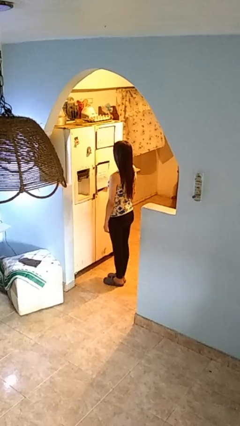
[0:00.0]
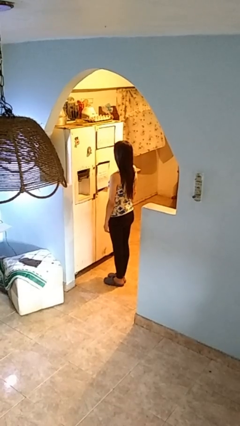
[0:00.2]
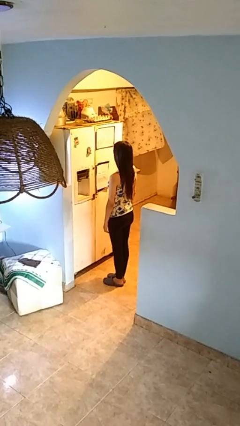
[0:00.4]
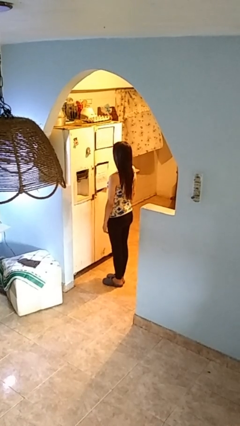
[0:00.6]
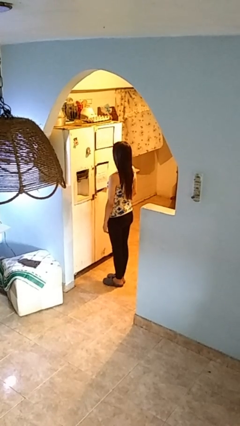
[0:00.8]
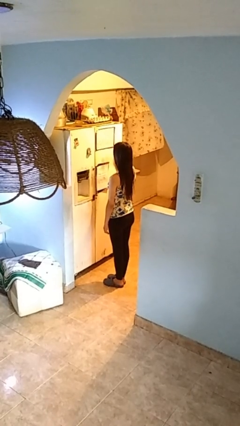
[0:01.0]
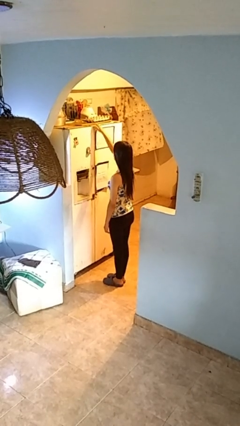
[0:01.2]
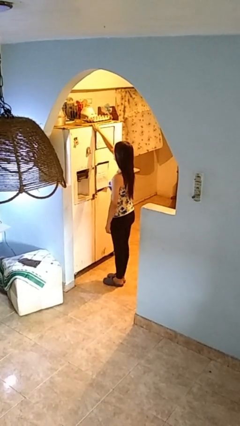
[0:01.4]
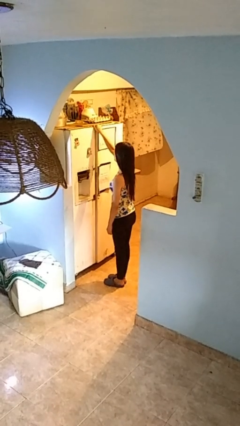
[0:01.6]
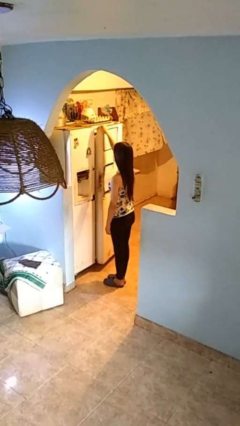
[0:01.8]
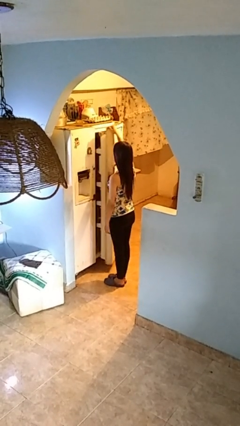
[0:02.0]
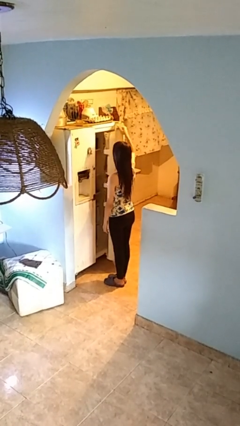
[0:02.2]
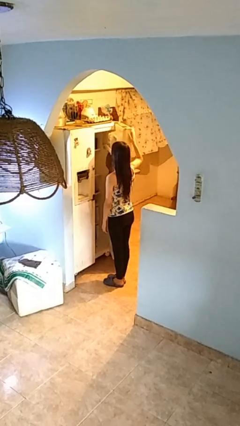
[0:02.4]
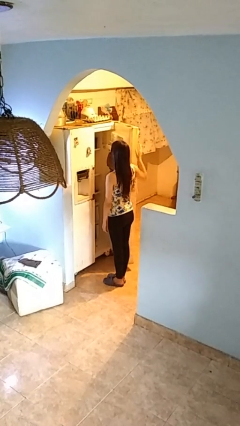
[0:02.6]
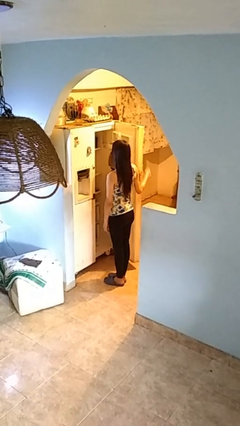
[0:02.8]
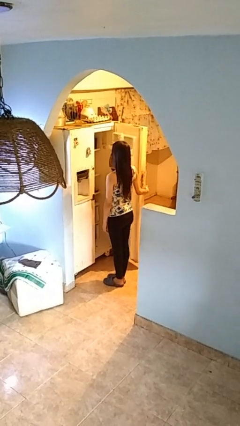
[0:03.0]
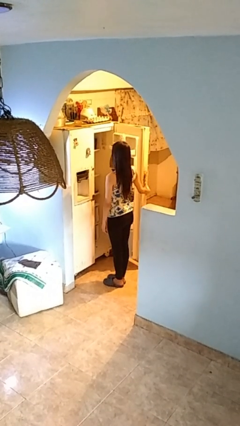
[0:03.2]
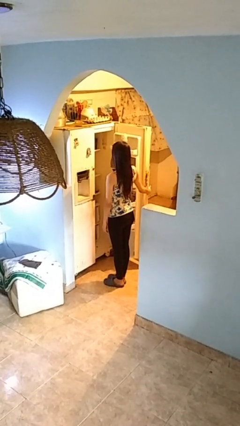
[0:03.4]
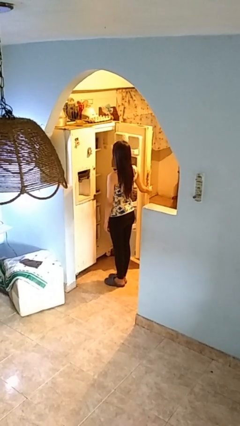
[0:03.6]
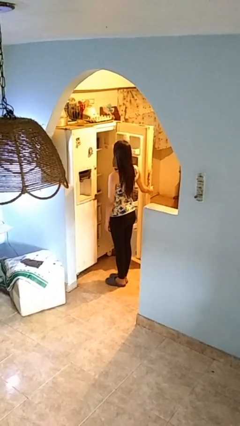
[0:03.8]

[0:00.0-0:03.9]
person opens refrigerator

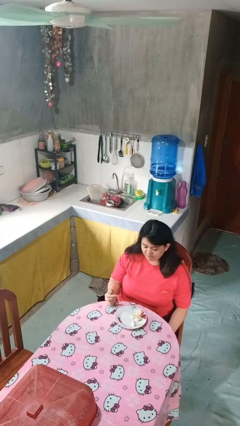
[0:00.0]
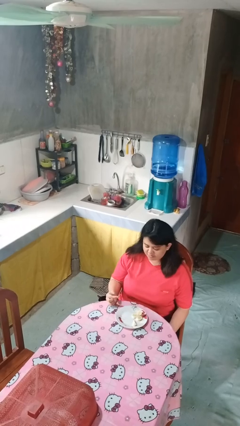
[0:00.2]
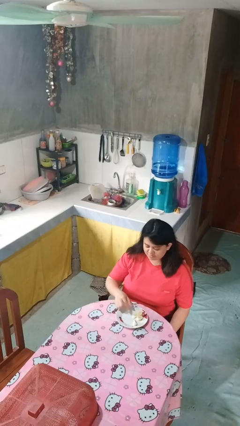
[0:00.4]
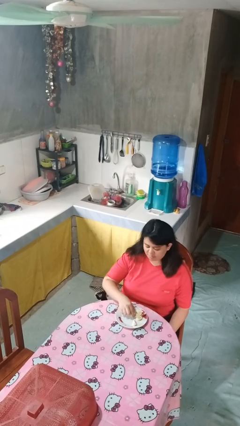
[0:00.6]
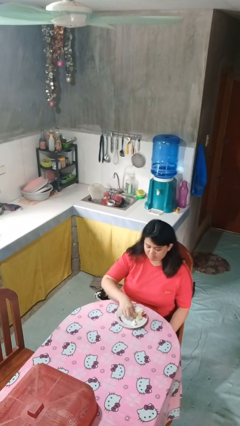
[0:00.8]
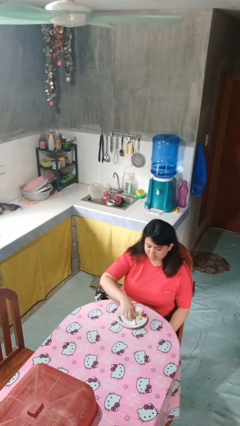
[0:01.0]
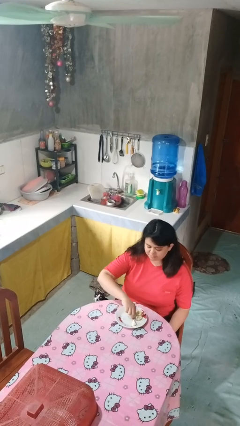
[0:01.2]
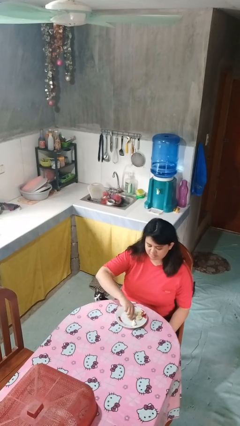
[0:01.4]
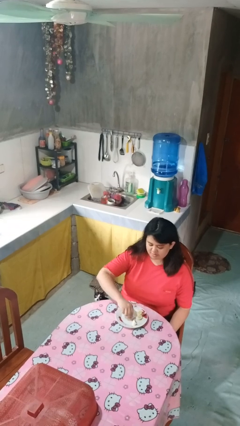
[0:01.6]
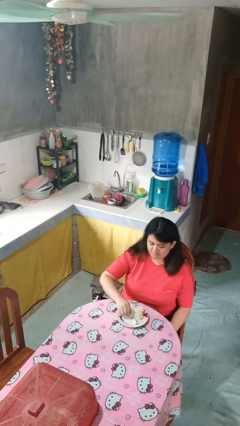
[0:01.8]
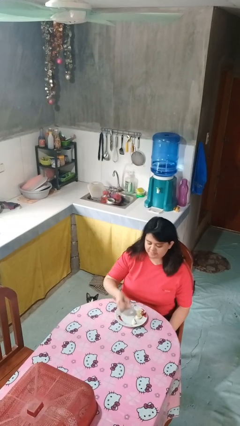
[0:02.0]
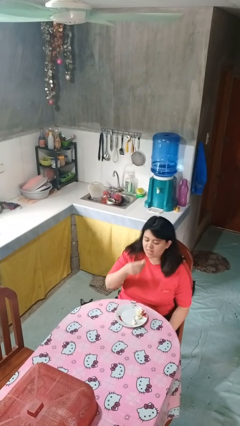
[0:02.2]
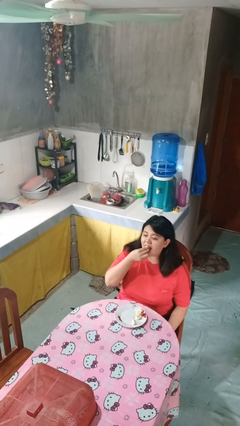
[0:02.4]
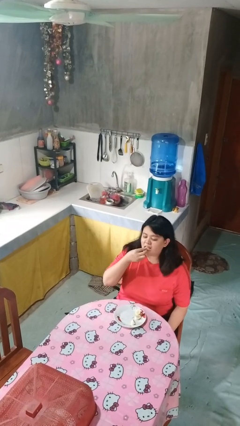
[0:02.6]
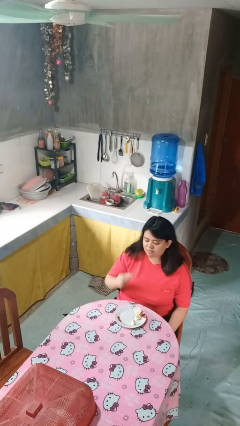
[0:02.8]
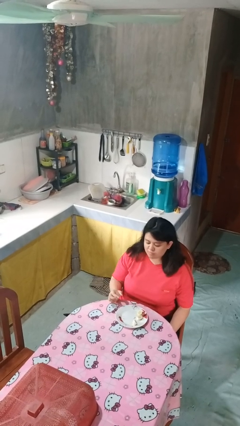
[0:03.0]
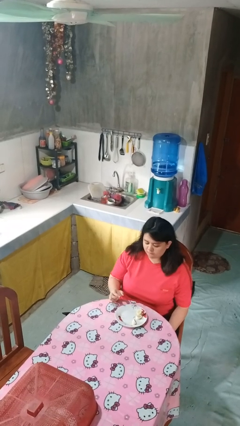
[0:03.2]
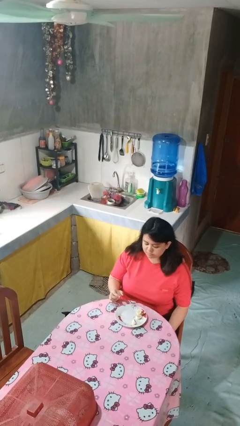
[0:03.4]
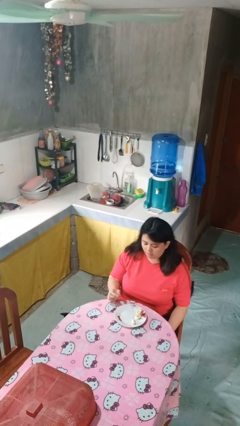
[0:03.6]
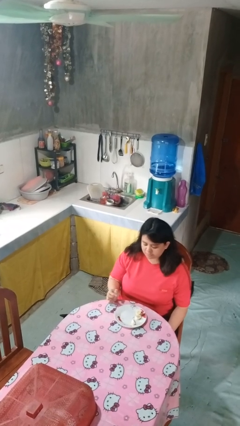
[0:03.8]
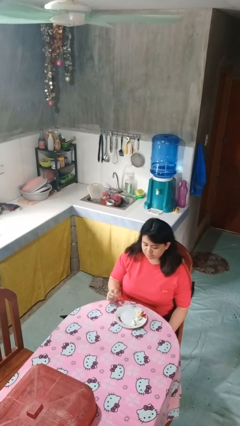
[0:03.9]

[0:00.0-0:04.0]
person eats with hands

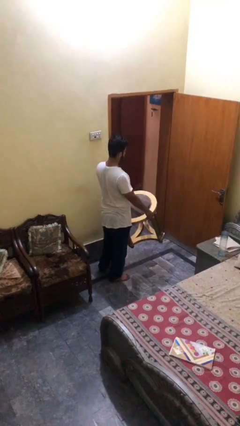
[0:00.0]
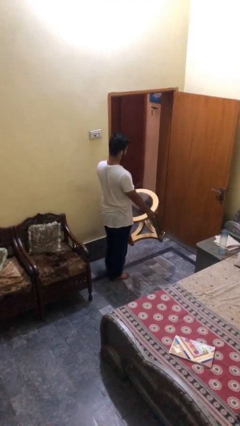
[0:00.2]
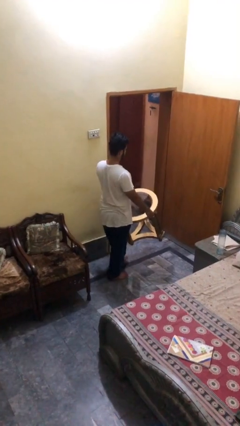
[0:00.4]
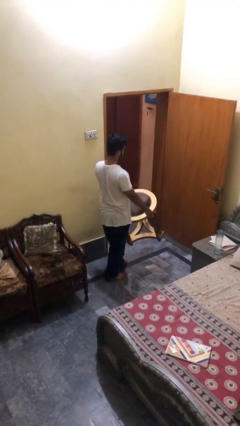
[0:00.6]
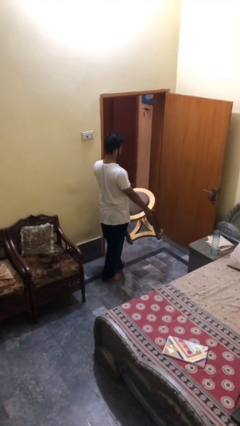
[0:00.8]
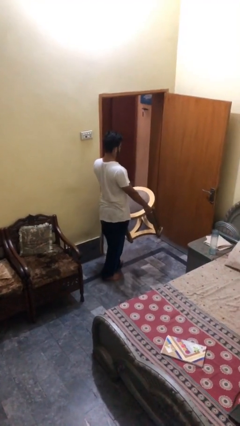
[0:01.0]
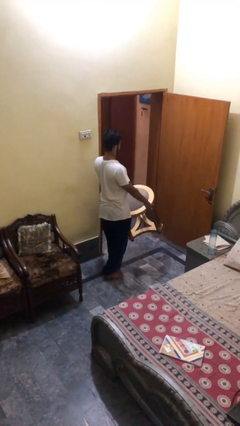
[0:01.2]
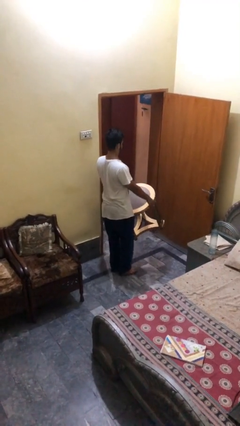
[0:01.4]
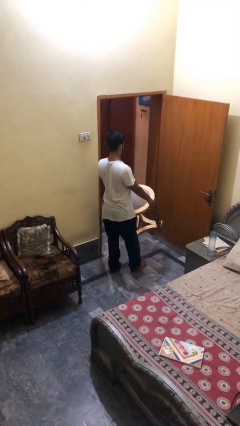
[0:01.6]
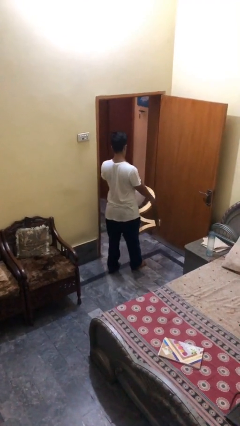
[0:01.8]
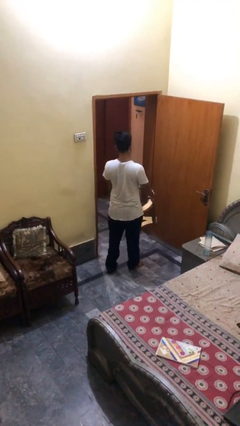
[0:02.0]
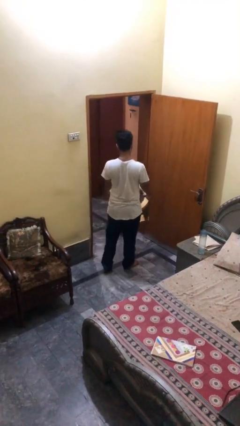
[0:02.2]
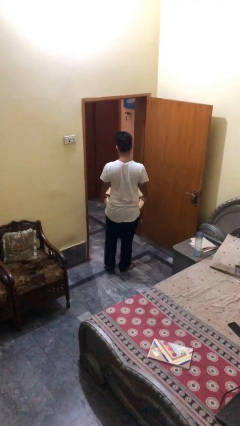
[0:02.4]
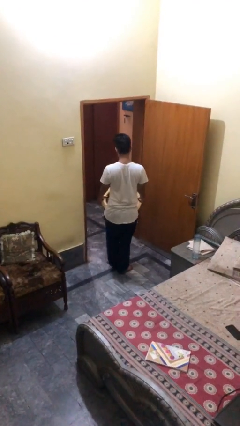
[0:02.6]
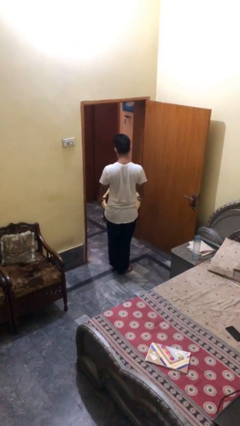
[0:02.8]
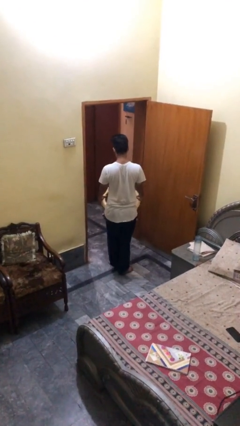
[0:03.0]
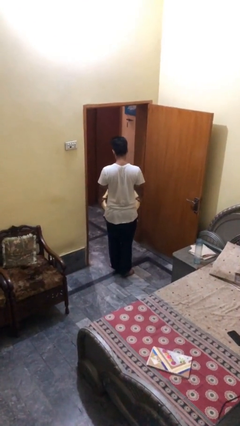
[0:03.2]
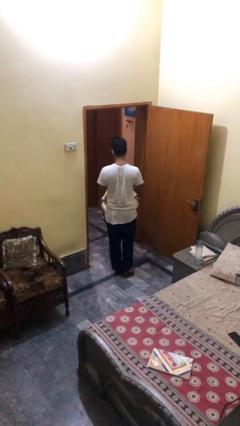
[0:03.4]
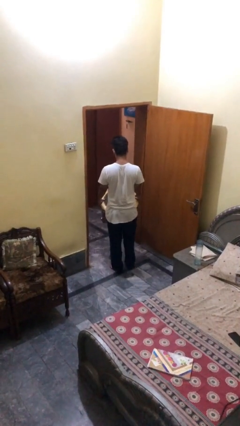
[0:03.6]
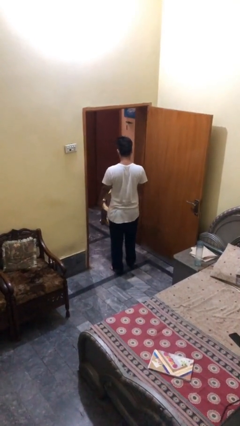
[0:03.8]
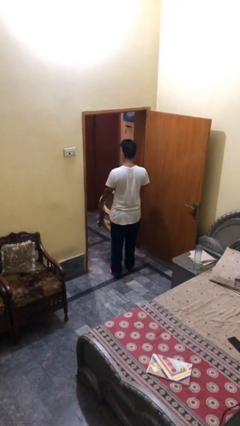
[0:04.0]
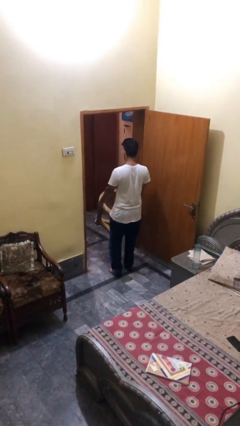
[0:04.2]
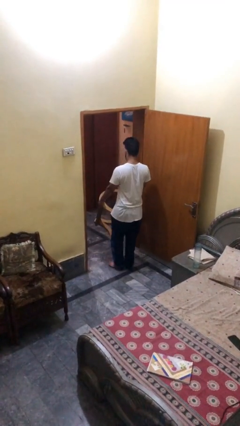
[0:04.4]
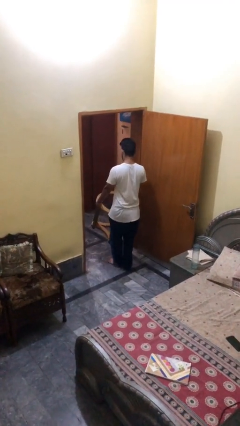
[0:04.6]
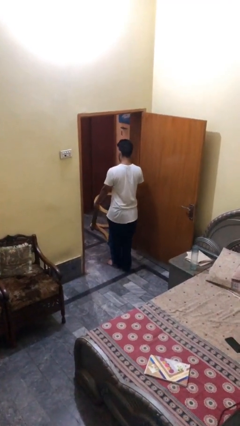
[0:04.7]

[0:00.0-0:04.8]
person carries heavy object

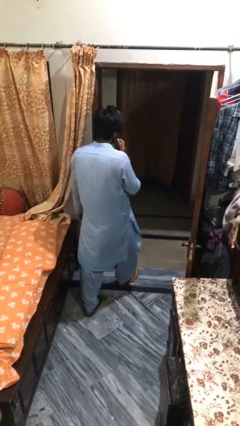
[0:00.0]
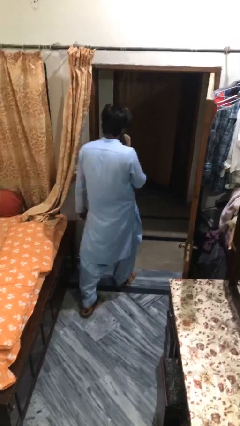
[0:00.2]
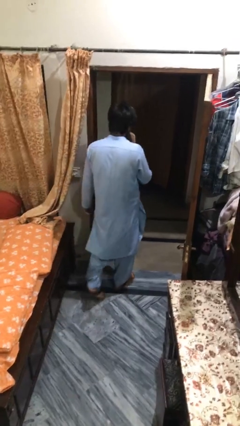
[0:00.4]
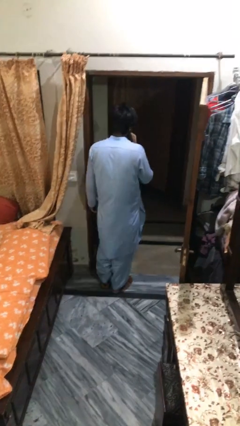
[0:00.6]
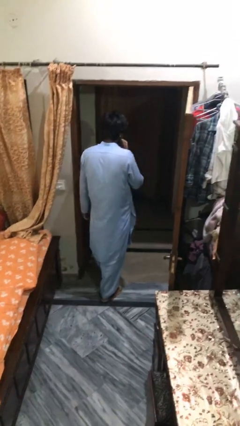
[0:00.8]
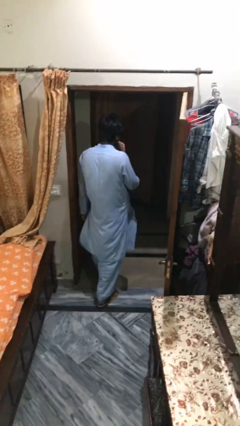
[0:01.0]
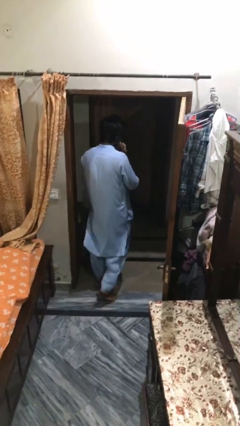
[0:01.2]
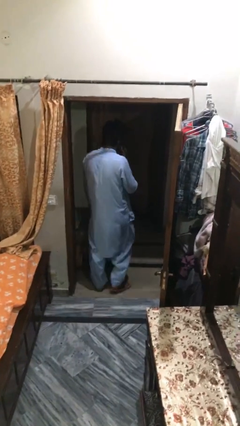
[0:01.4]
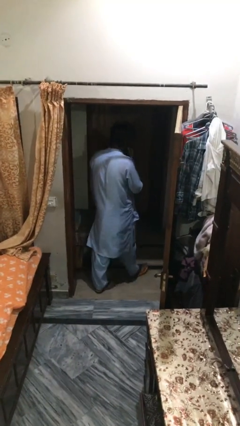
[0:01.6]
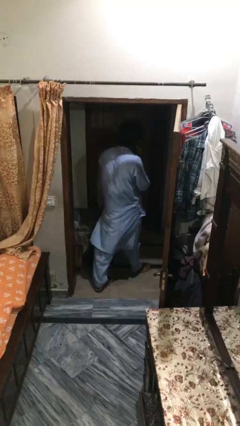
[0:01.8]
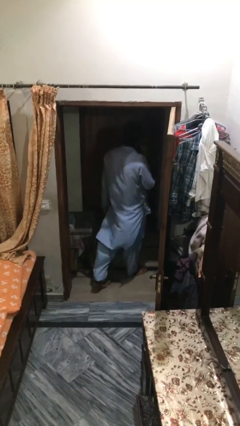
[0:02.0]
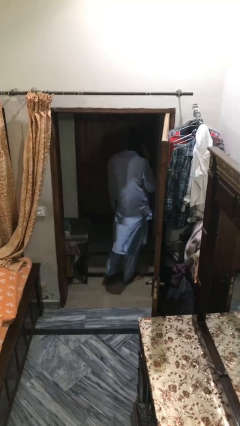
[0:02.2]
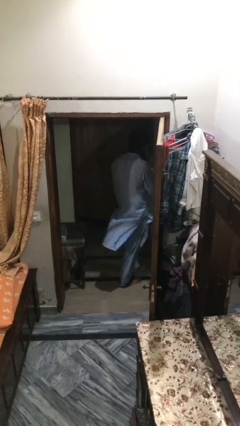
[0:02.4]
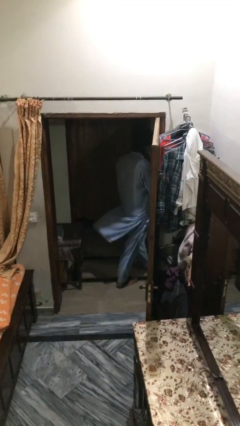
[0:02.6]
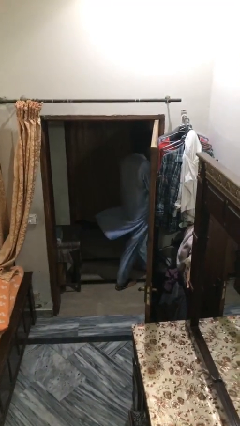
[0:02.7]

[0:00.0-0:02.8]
person exits scene through structure

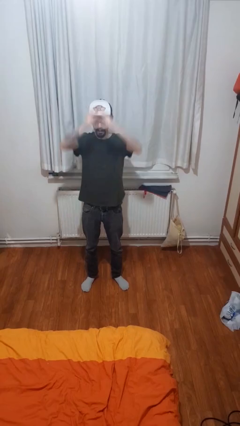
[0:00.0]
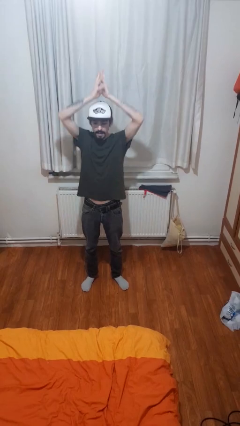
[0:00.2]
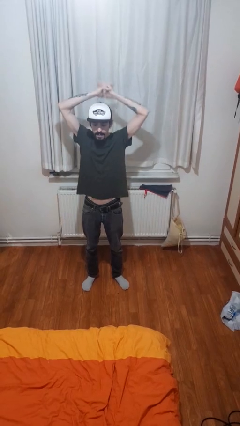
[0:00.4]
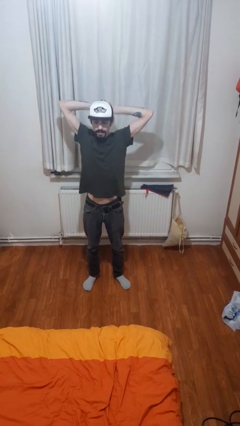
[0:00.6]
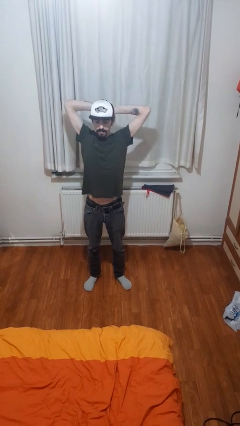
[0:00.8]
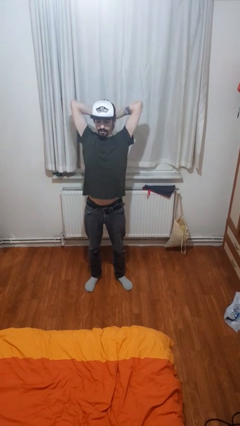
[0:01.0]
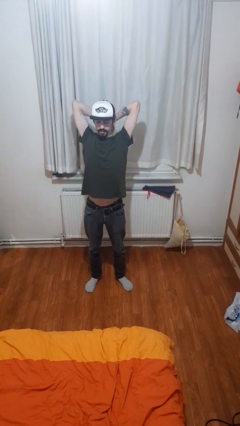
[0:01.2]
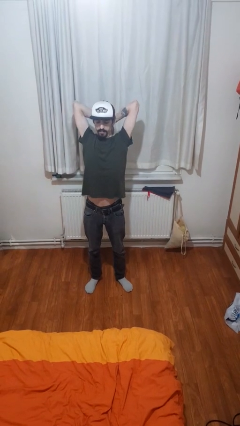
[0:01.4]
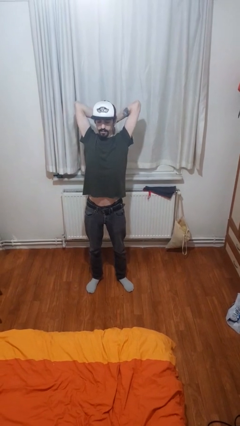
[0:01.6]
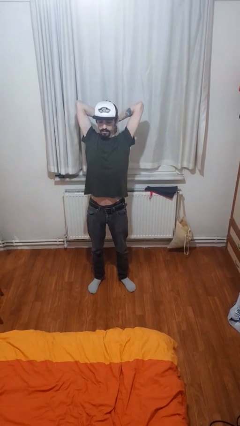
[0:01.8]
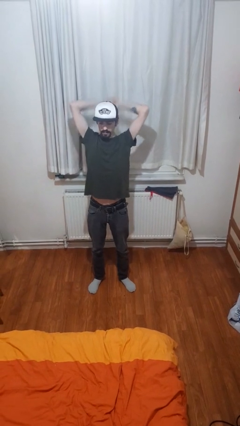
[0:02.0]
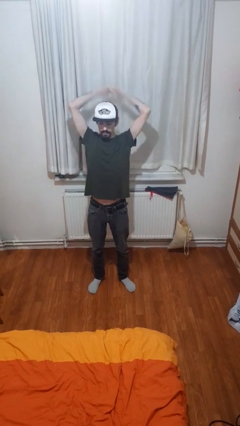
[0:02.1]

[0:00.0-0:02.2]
person stretches arms over head
